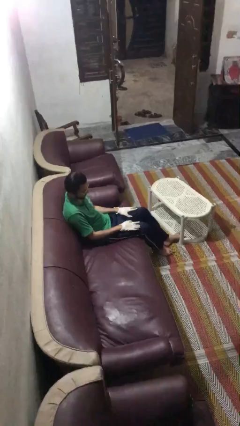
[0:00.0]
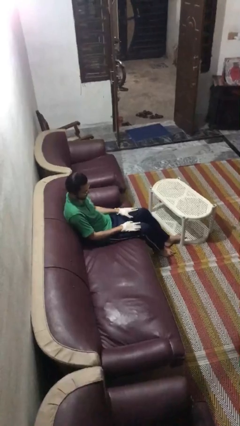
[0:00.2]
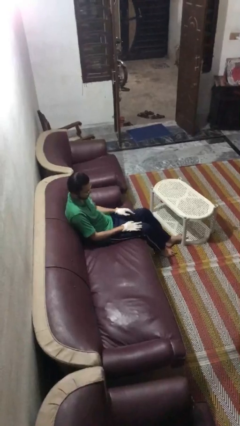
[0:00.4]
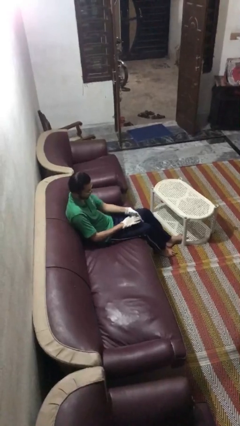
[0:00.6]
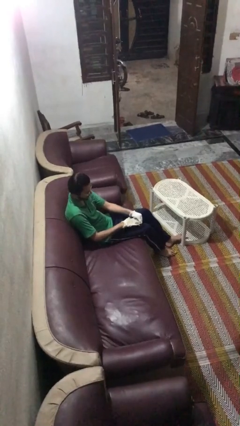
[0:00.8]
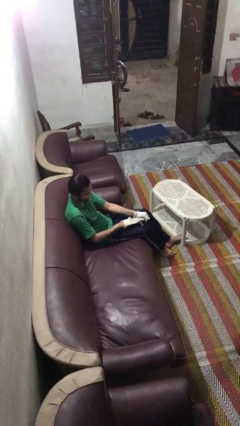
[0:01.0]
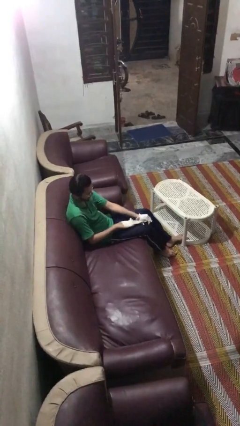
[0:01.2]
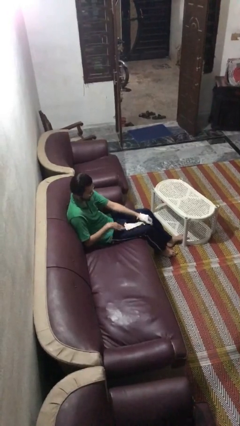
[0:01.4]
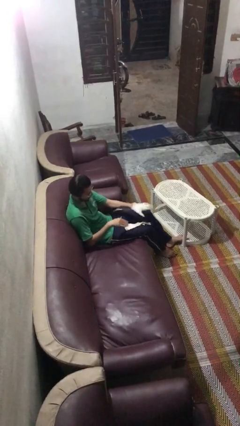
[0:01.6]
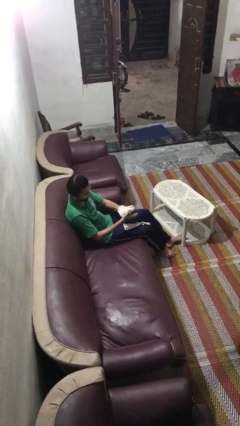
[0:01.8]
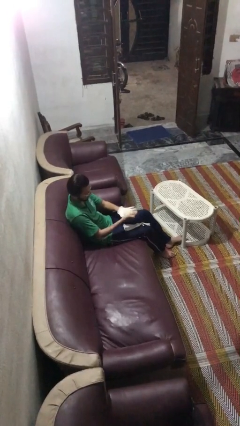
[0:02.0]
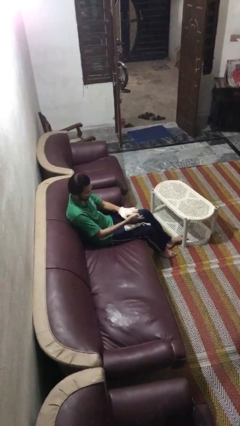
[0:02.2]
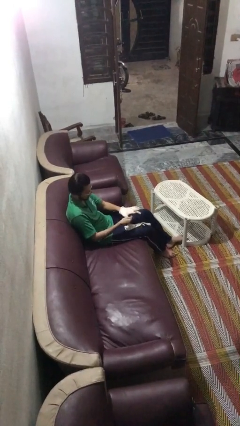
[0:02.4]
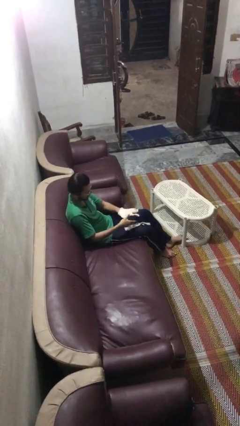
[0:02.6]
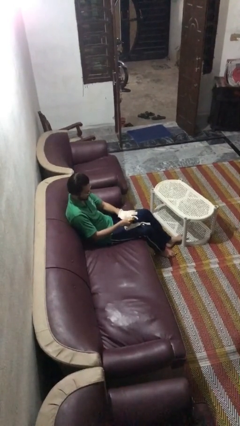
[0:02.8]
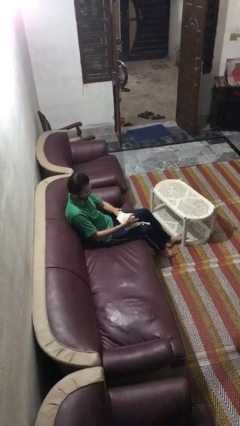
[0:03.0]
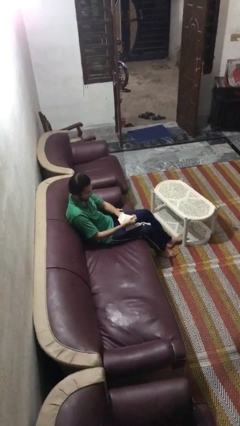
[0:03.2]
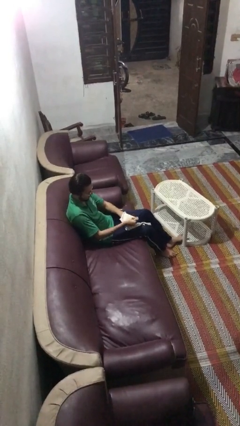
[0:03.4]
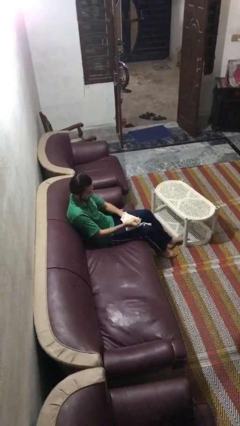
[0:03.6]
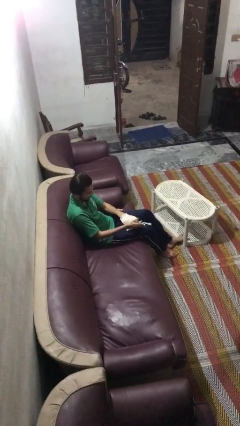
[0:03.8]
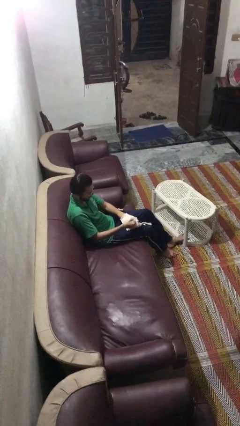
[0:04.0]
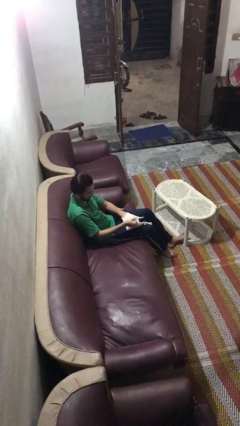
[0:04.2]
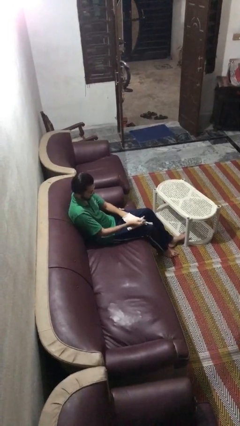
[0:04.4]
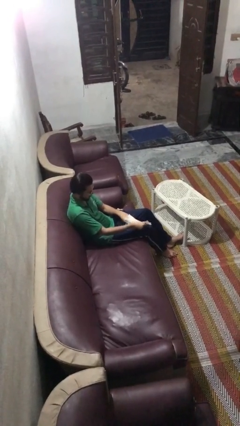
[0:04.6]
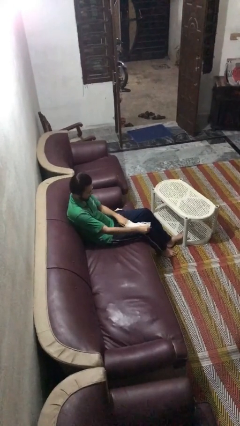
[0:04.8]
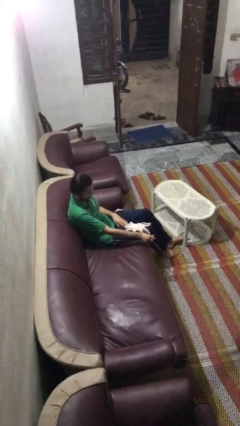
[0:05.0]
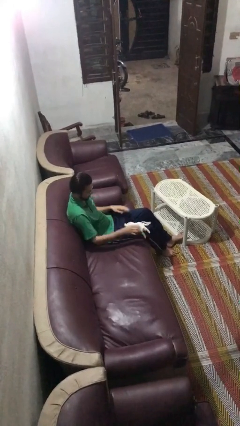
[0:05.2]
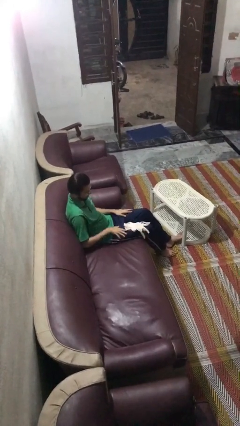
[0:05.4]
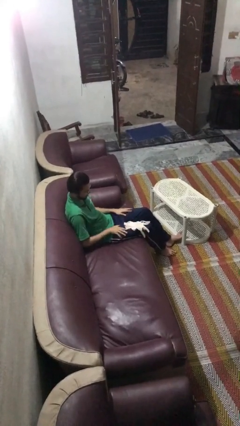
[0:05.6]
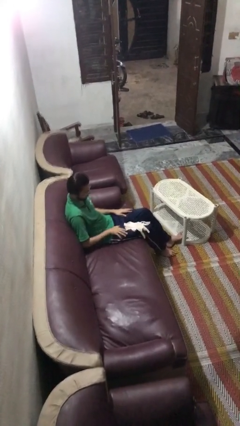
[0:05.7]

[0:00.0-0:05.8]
person takes off gloves

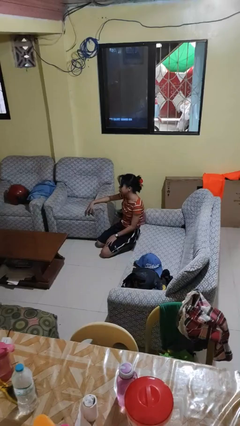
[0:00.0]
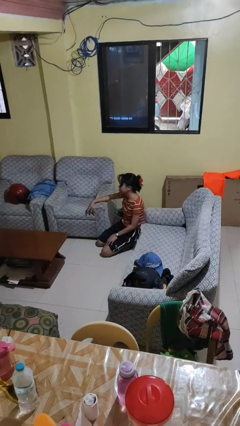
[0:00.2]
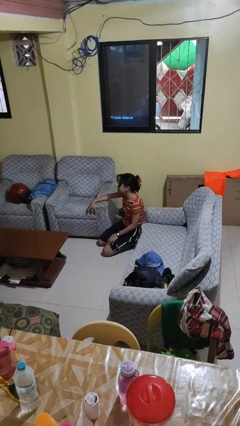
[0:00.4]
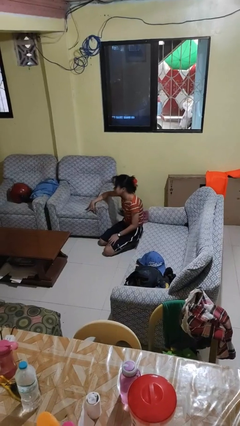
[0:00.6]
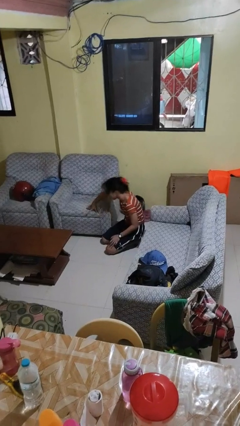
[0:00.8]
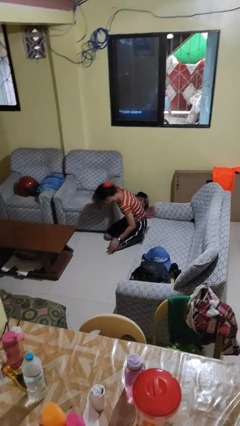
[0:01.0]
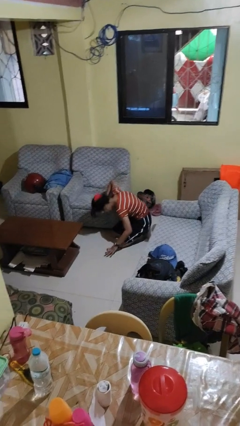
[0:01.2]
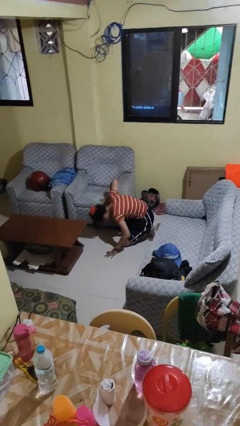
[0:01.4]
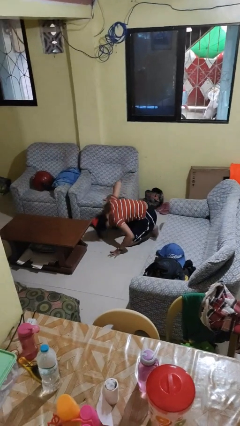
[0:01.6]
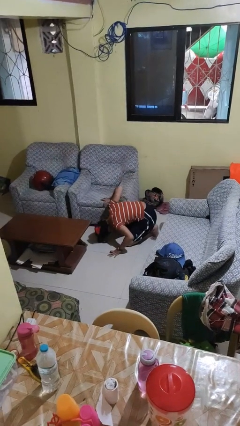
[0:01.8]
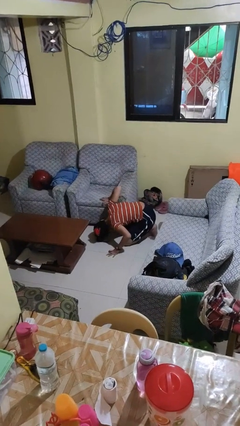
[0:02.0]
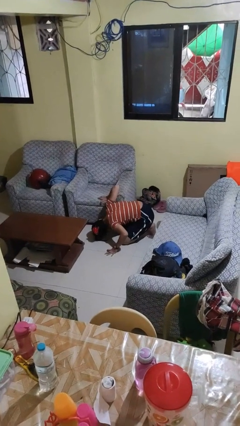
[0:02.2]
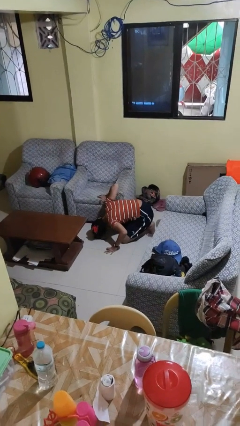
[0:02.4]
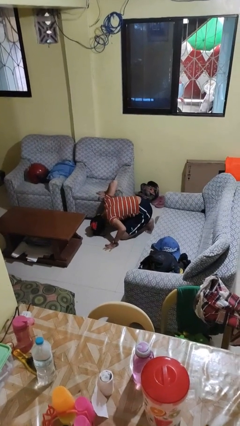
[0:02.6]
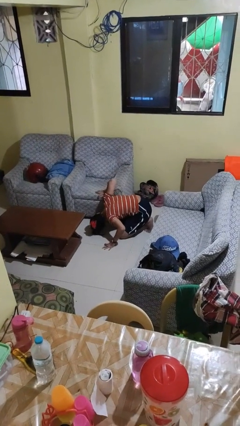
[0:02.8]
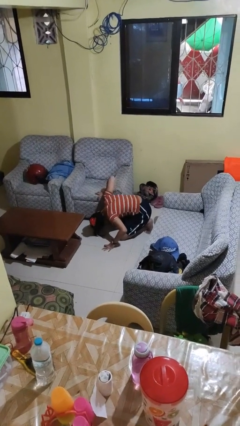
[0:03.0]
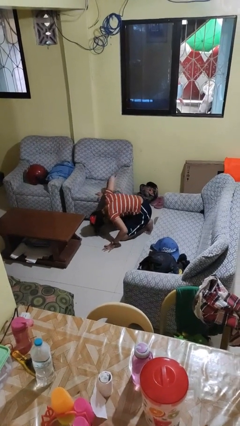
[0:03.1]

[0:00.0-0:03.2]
person searches under couch

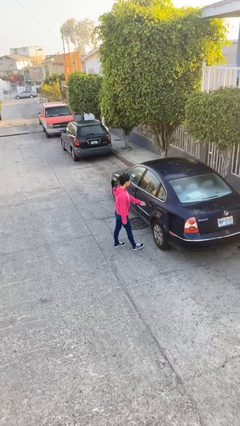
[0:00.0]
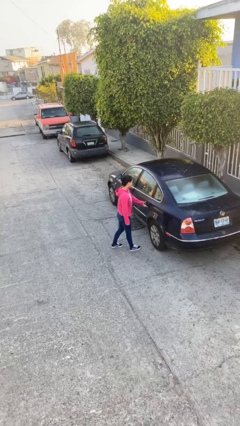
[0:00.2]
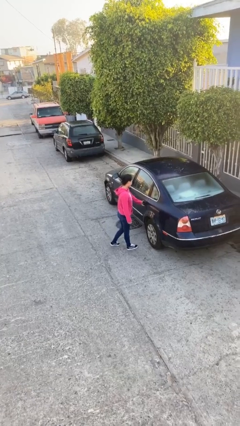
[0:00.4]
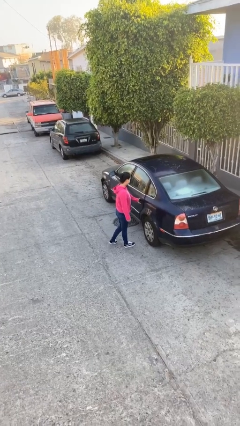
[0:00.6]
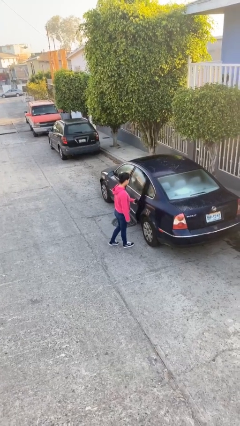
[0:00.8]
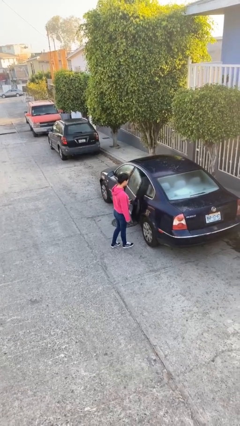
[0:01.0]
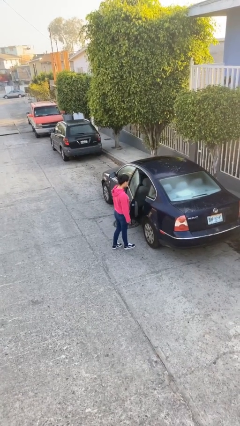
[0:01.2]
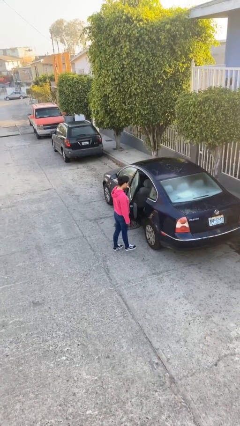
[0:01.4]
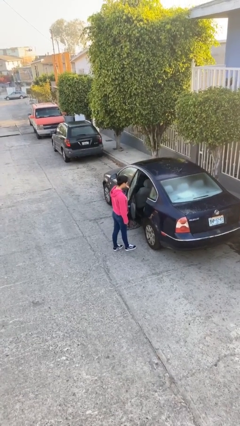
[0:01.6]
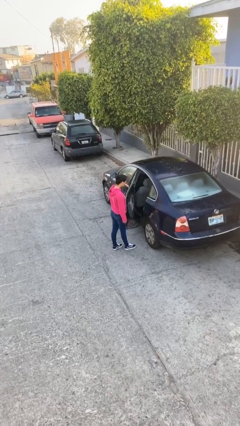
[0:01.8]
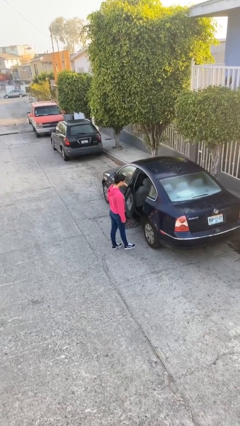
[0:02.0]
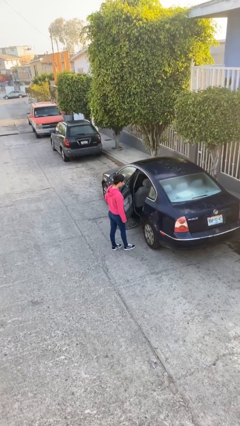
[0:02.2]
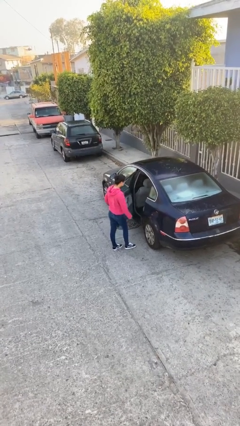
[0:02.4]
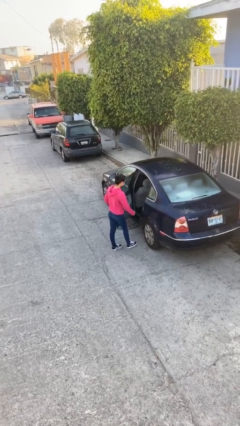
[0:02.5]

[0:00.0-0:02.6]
person opens car door

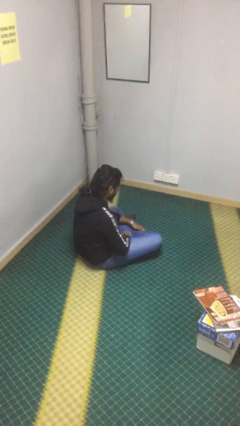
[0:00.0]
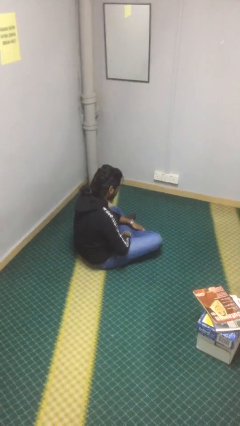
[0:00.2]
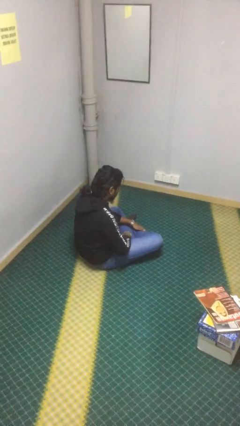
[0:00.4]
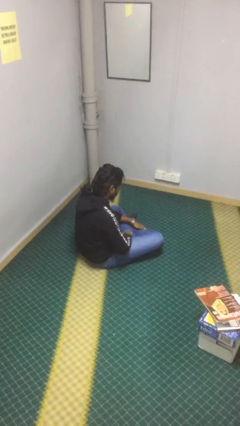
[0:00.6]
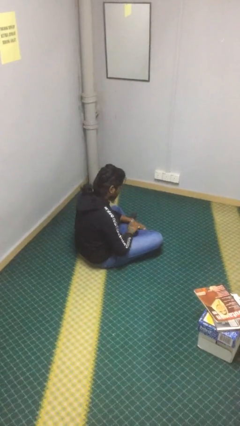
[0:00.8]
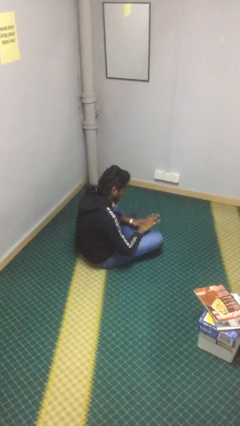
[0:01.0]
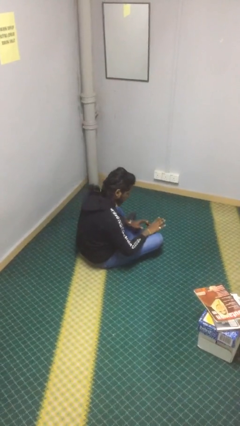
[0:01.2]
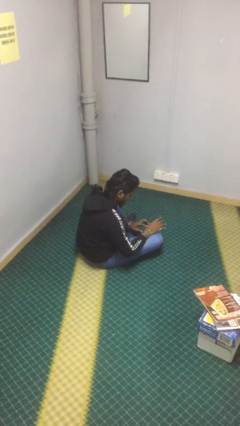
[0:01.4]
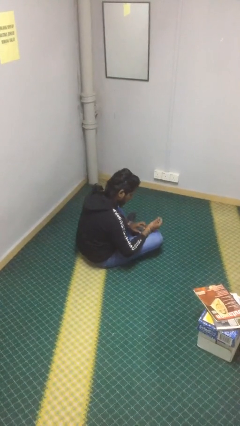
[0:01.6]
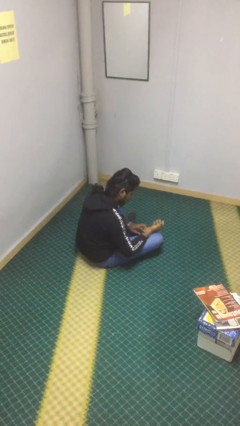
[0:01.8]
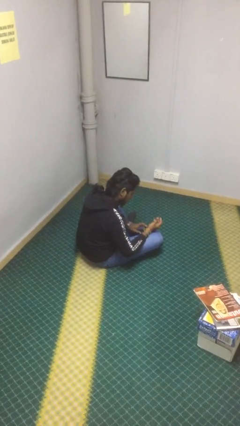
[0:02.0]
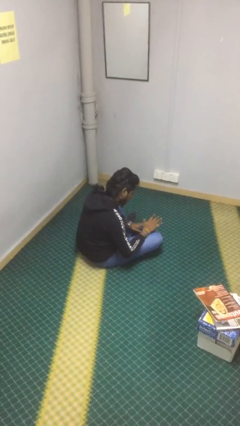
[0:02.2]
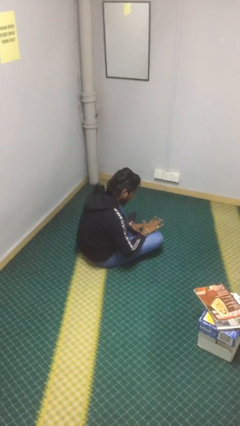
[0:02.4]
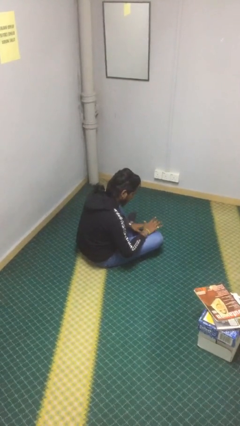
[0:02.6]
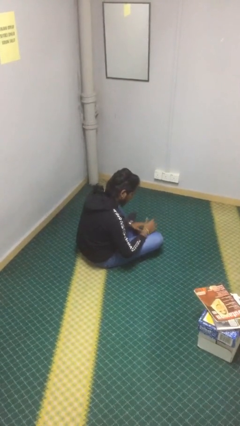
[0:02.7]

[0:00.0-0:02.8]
person looks at hands in lap

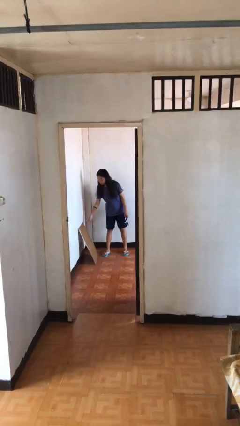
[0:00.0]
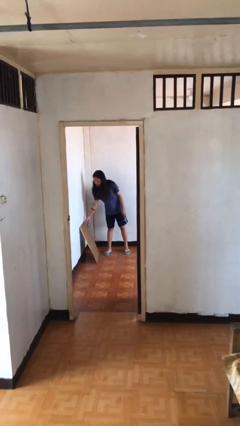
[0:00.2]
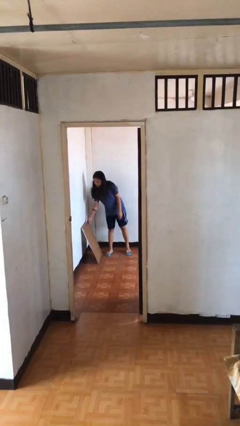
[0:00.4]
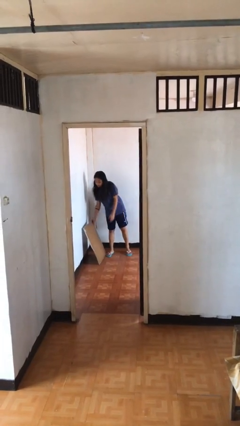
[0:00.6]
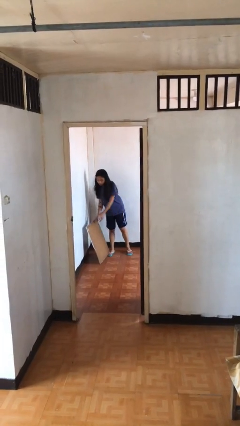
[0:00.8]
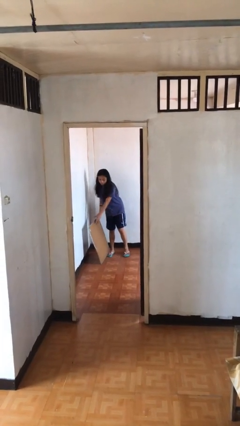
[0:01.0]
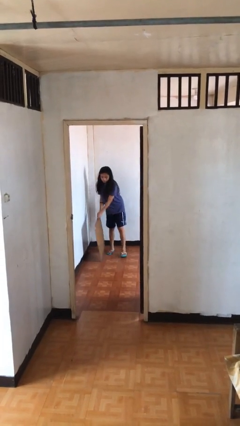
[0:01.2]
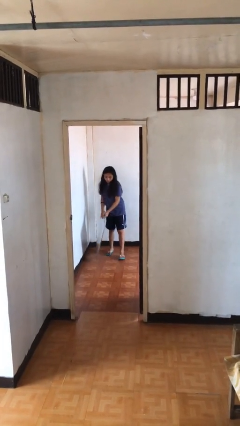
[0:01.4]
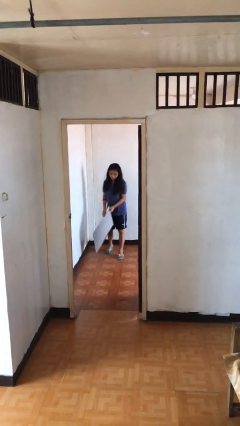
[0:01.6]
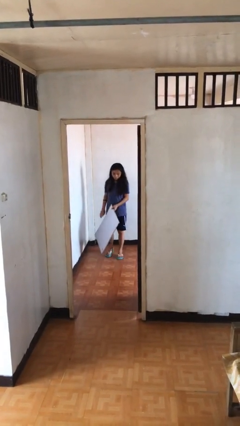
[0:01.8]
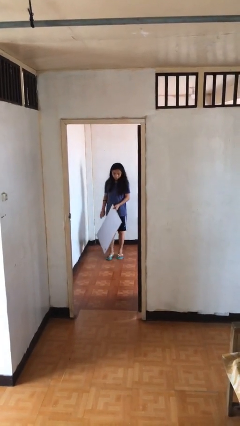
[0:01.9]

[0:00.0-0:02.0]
person picks up object from floor

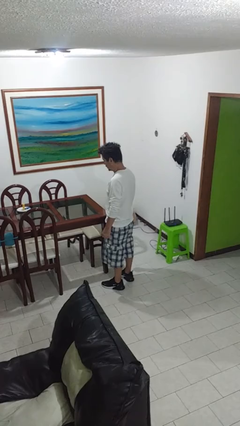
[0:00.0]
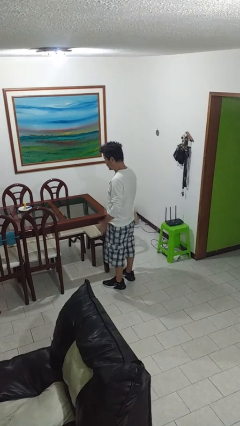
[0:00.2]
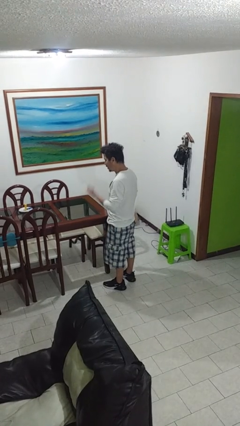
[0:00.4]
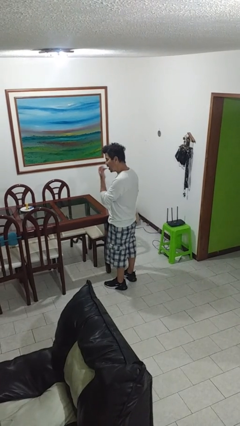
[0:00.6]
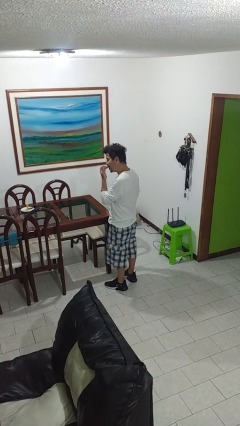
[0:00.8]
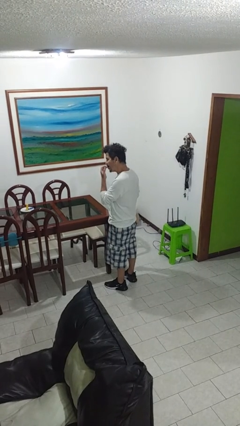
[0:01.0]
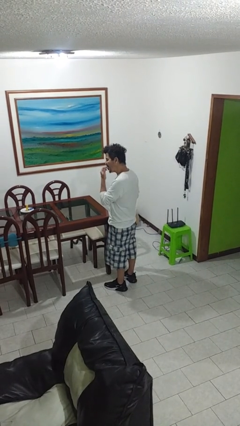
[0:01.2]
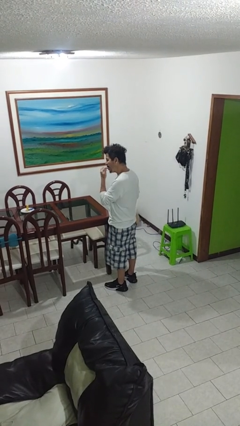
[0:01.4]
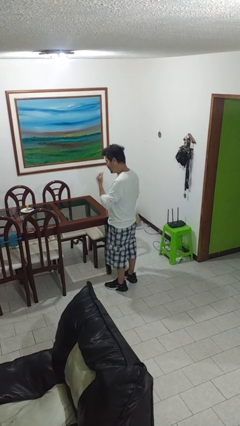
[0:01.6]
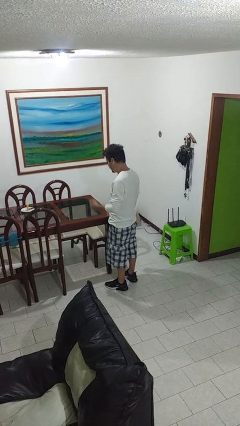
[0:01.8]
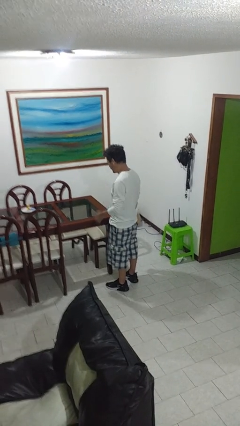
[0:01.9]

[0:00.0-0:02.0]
person licks fingers
